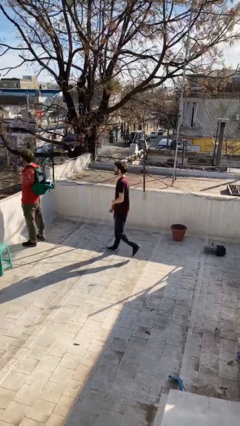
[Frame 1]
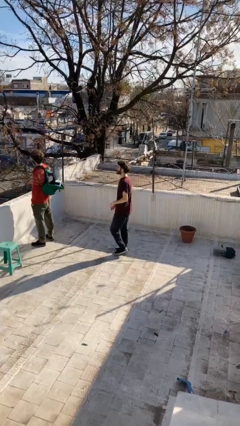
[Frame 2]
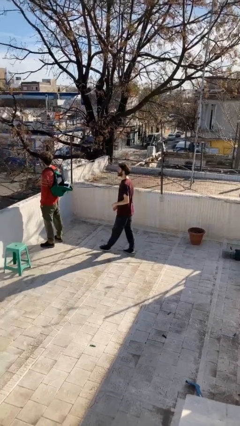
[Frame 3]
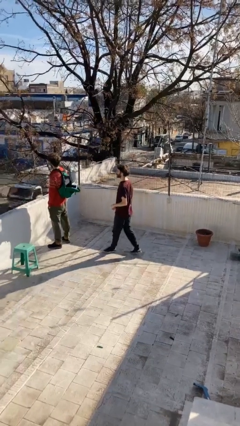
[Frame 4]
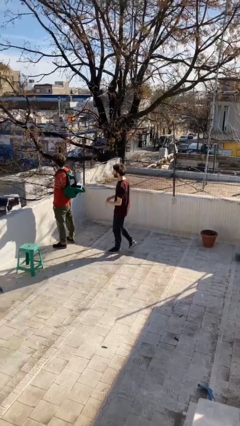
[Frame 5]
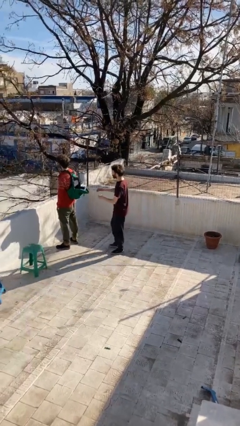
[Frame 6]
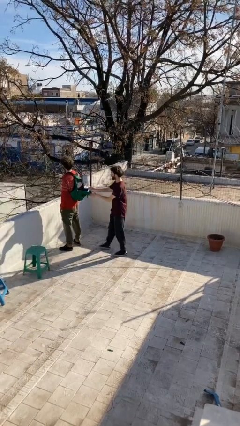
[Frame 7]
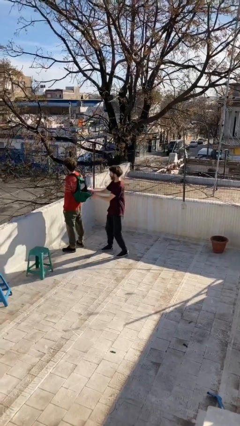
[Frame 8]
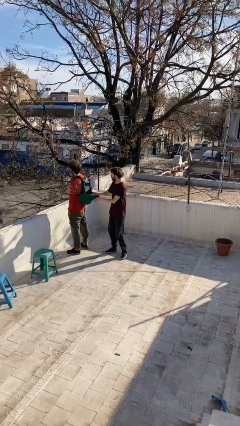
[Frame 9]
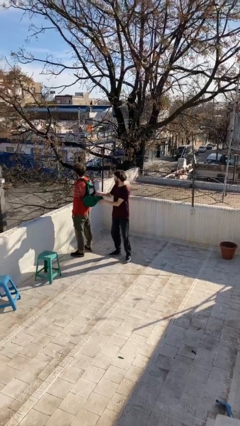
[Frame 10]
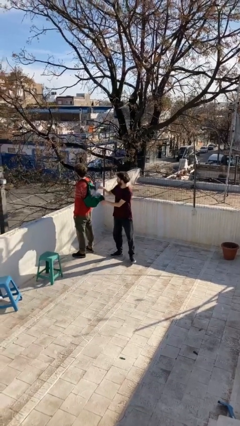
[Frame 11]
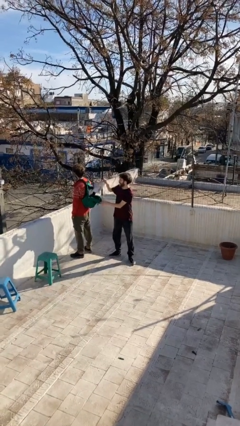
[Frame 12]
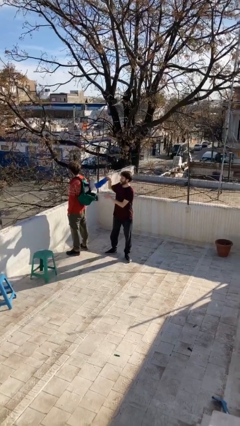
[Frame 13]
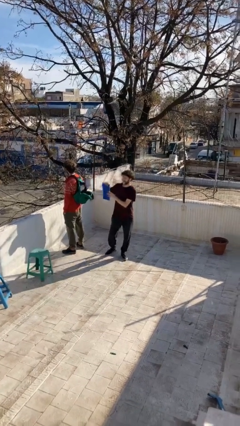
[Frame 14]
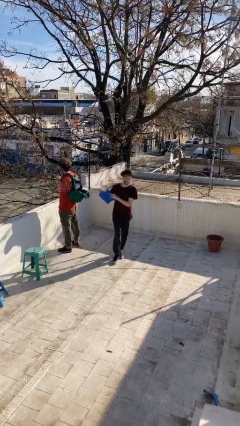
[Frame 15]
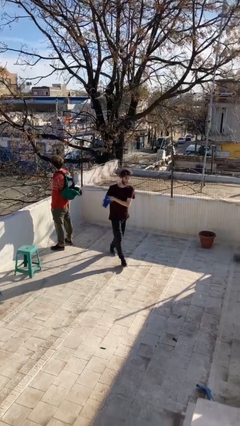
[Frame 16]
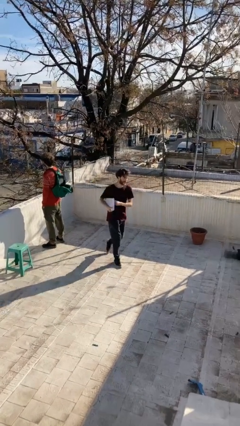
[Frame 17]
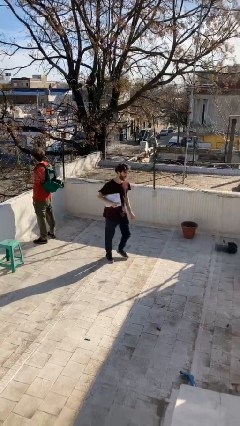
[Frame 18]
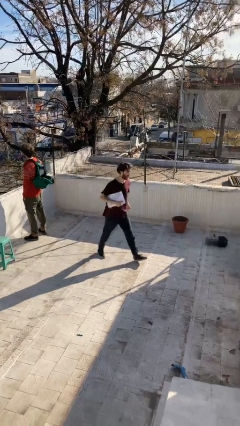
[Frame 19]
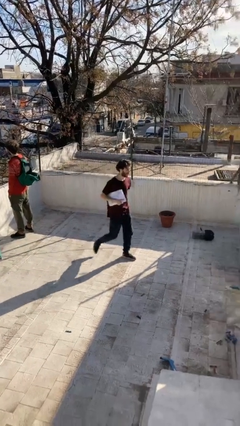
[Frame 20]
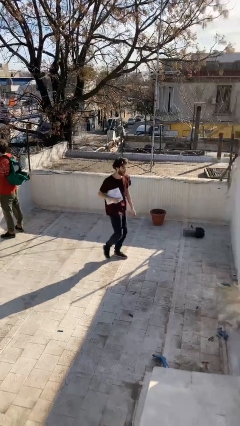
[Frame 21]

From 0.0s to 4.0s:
person steals object from person

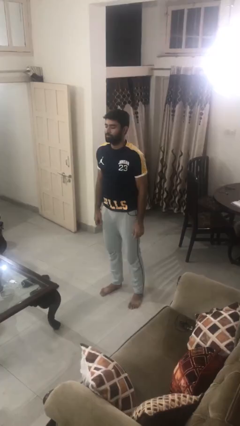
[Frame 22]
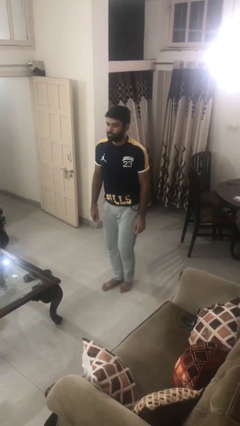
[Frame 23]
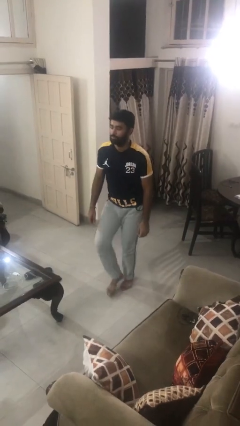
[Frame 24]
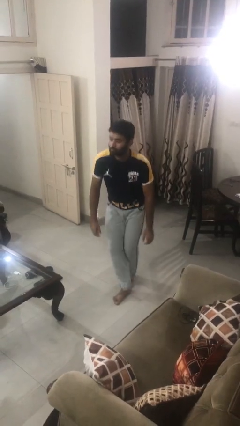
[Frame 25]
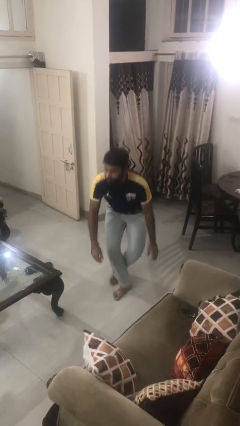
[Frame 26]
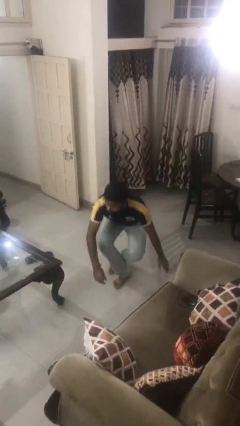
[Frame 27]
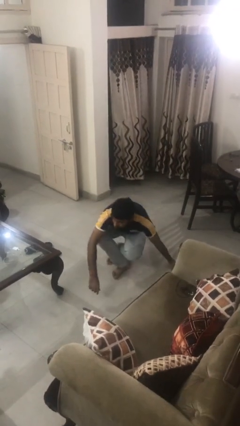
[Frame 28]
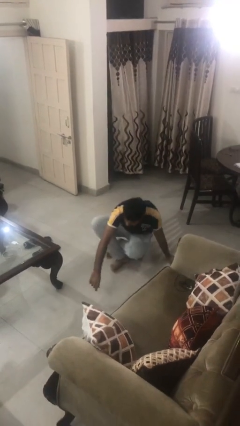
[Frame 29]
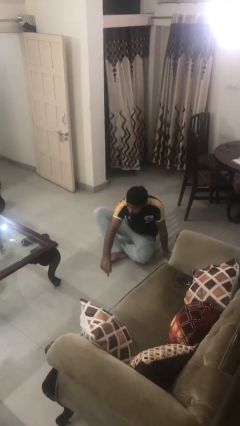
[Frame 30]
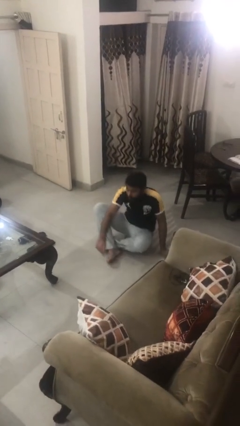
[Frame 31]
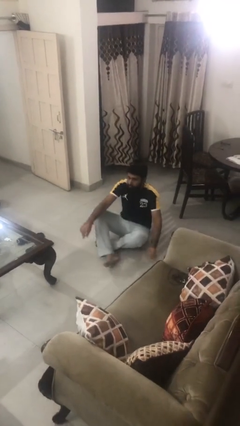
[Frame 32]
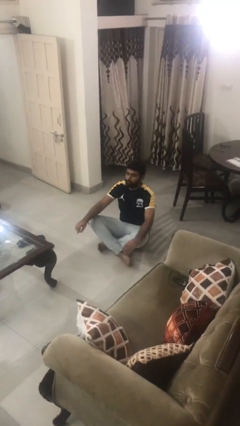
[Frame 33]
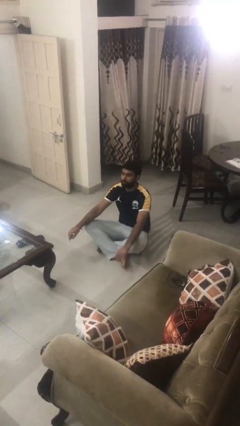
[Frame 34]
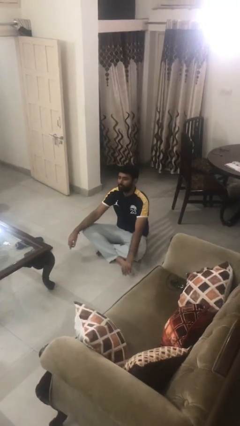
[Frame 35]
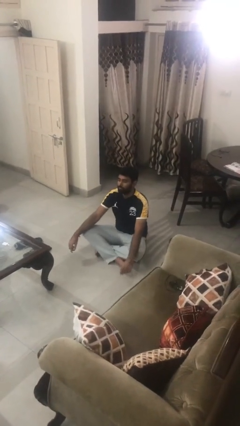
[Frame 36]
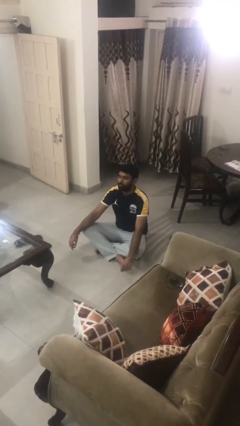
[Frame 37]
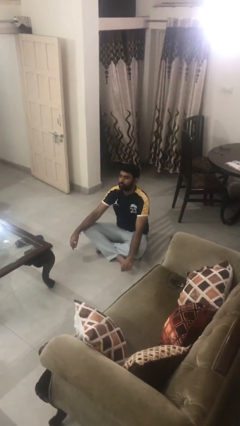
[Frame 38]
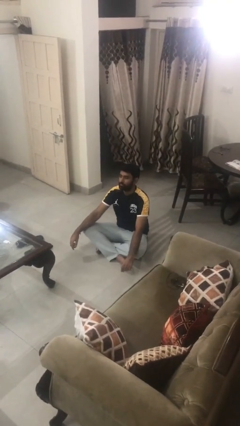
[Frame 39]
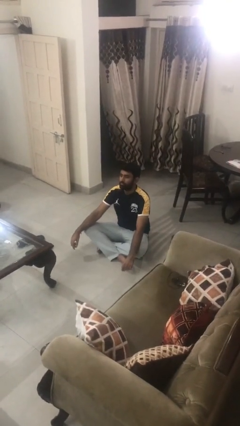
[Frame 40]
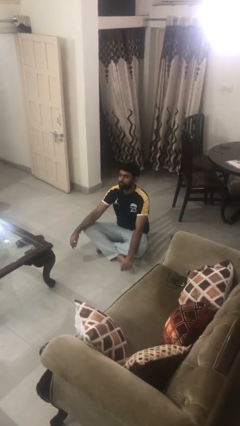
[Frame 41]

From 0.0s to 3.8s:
person sits crisscross

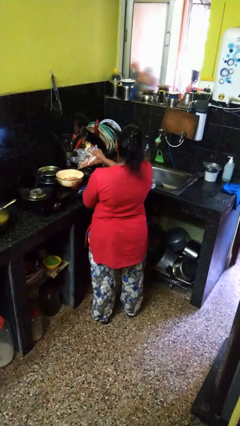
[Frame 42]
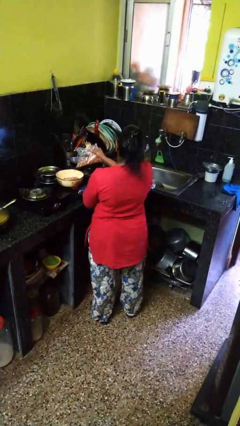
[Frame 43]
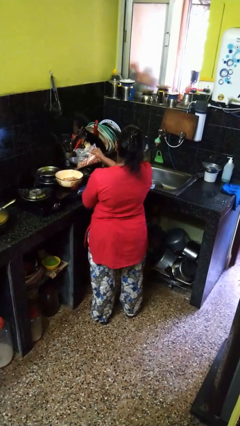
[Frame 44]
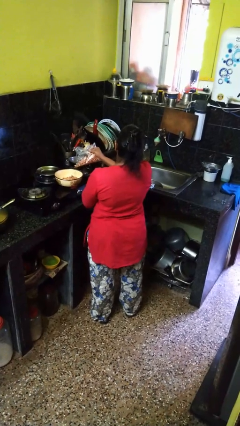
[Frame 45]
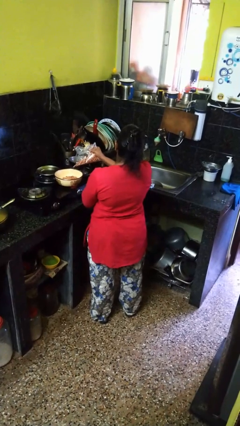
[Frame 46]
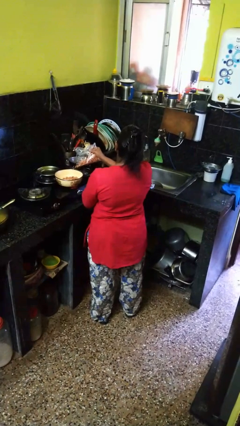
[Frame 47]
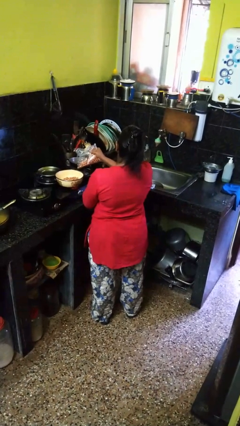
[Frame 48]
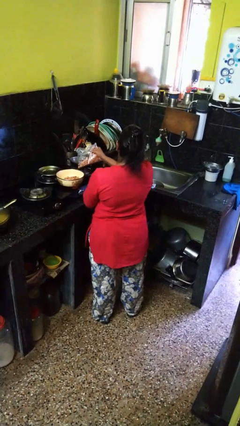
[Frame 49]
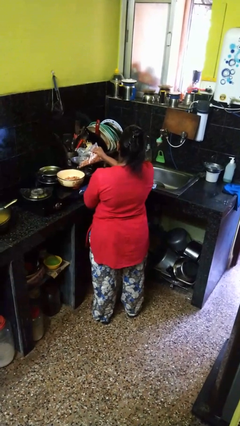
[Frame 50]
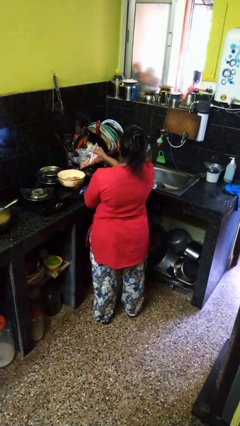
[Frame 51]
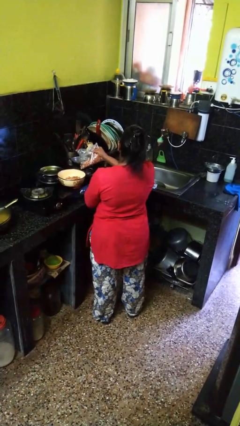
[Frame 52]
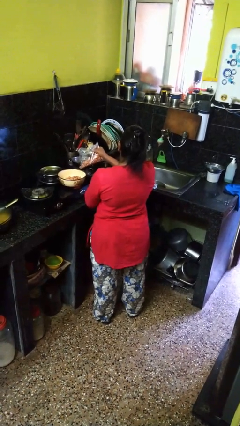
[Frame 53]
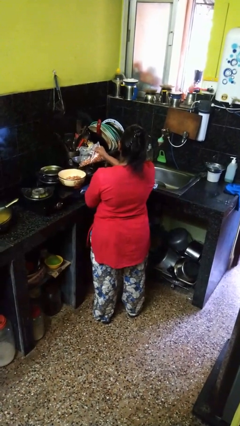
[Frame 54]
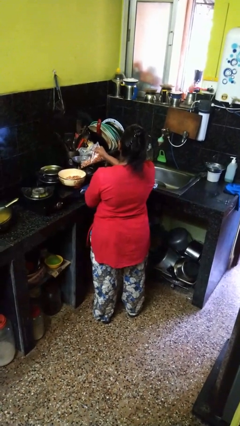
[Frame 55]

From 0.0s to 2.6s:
person pours into bowl

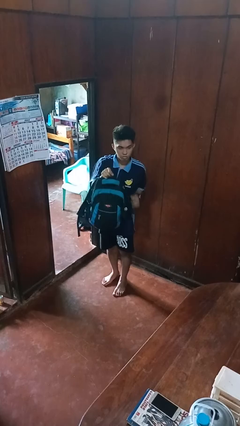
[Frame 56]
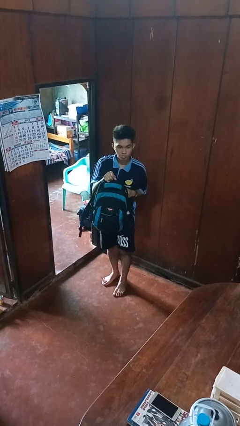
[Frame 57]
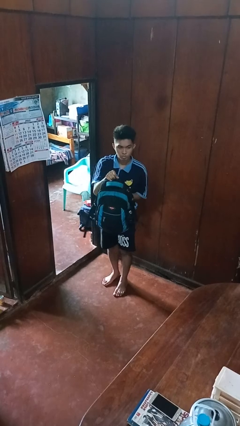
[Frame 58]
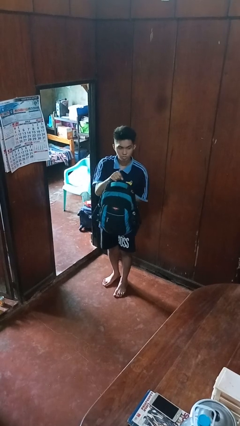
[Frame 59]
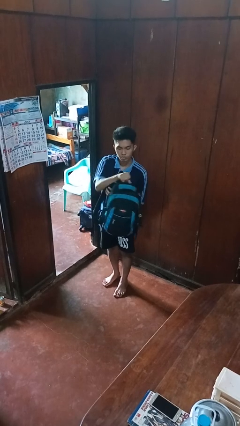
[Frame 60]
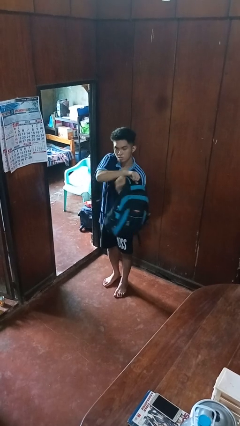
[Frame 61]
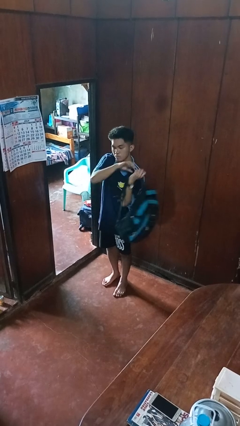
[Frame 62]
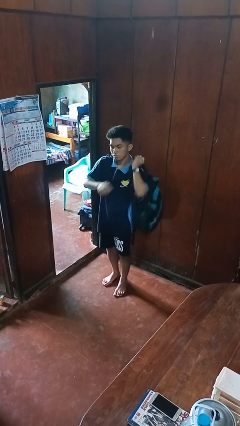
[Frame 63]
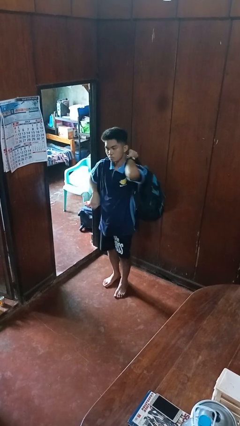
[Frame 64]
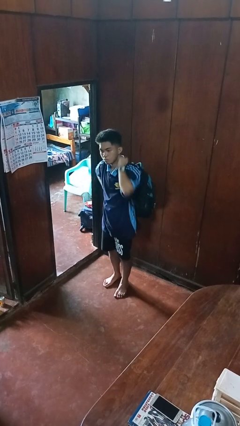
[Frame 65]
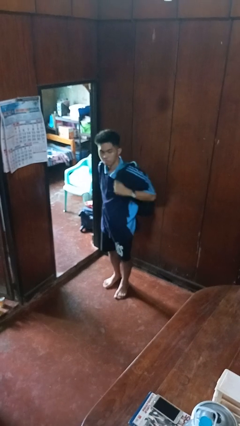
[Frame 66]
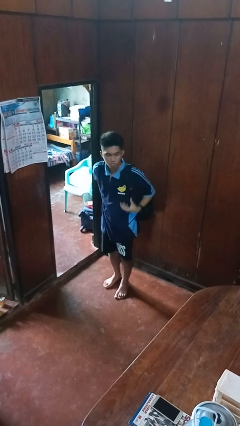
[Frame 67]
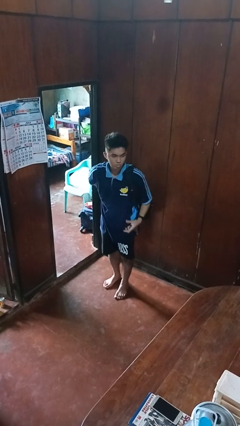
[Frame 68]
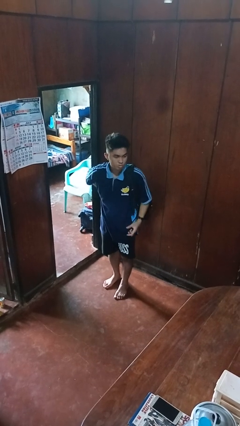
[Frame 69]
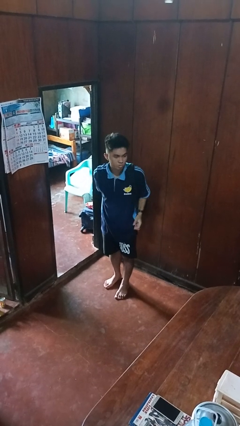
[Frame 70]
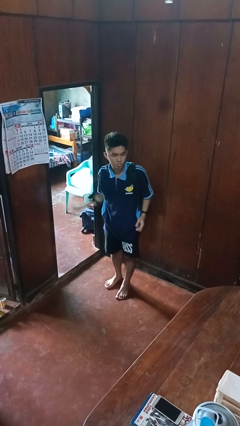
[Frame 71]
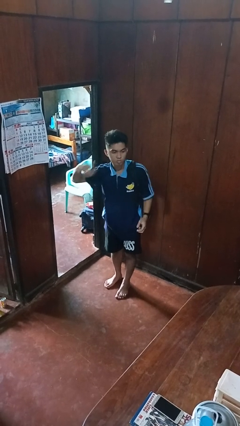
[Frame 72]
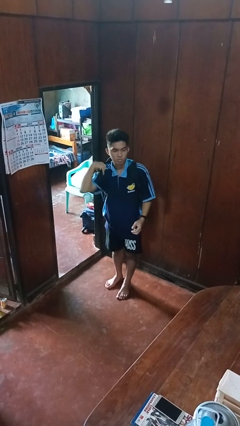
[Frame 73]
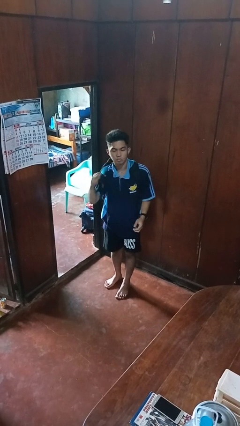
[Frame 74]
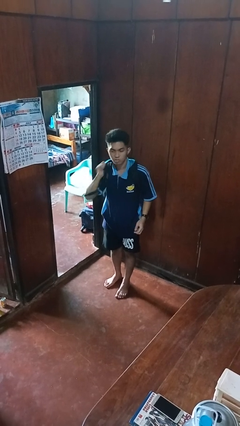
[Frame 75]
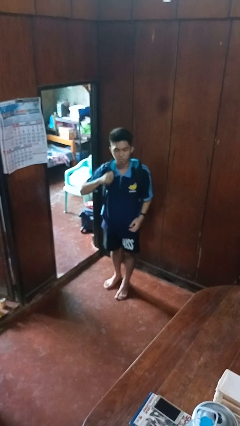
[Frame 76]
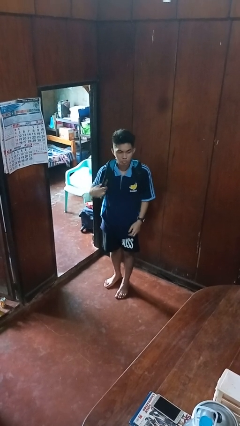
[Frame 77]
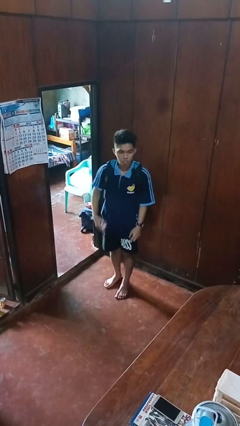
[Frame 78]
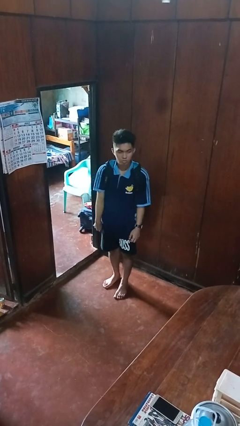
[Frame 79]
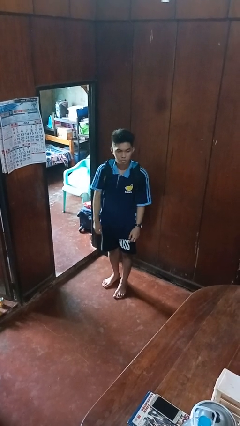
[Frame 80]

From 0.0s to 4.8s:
person puts on backpack

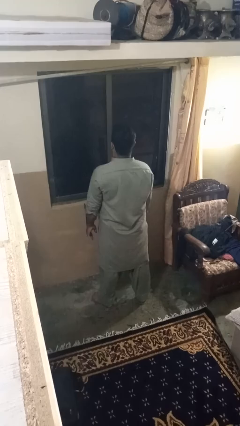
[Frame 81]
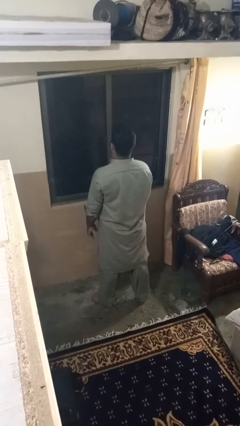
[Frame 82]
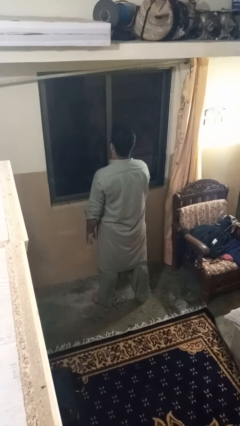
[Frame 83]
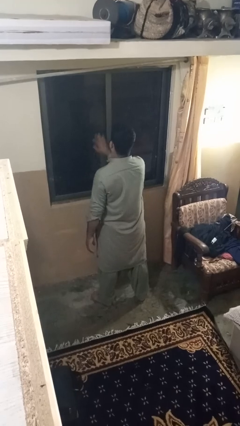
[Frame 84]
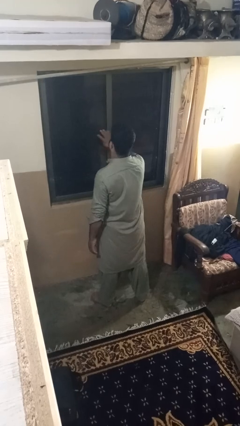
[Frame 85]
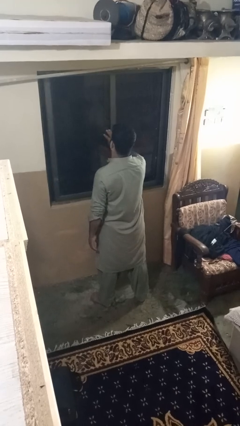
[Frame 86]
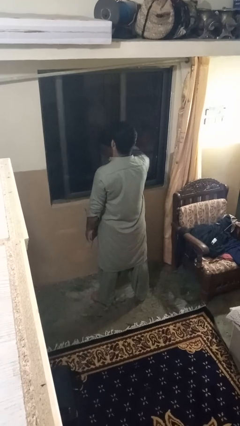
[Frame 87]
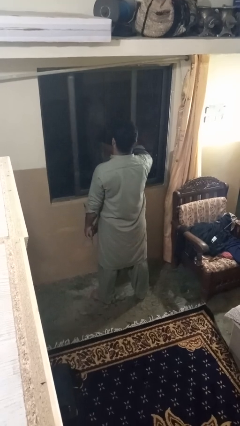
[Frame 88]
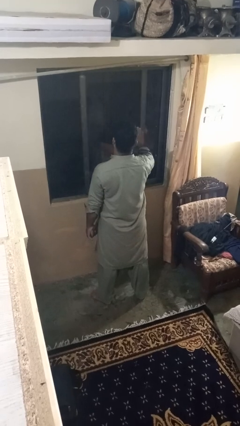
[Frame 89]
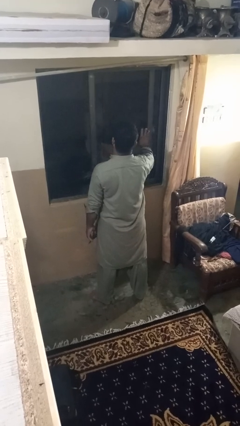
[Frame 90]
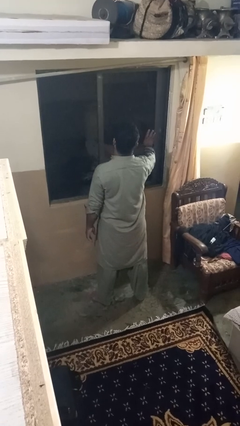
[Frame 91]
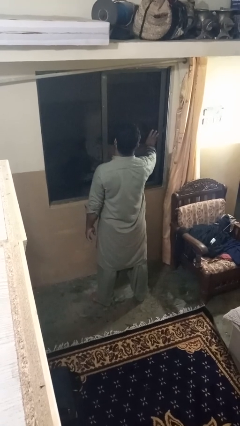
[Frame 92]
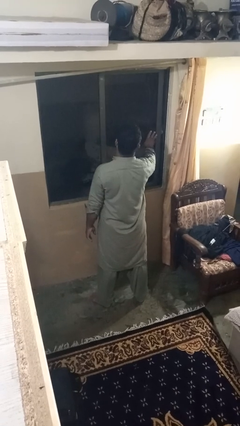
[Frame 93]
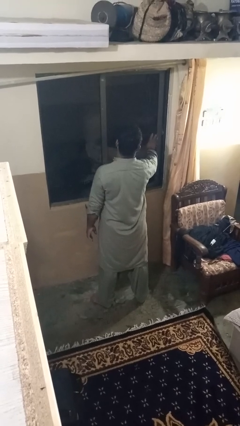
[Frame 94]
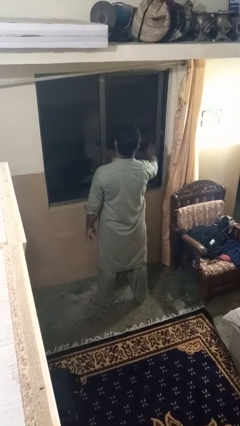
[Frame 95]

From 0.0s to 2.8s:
person opens home window
